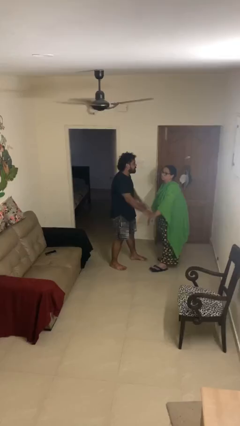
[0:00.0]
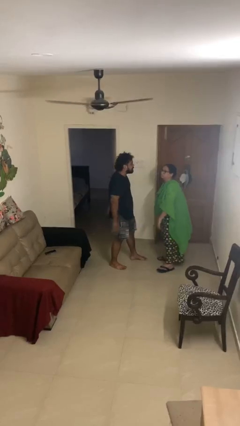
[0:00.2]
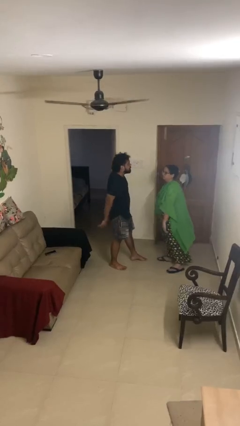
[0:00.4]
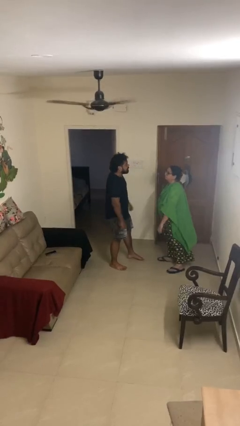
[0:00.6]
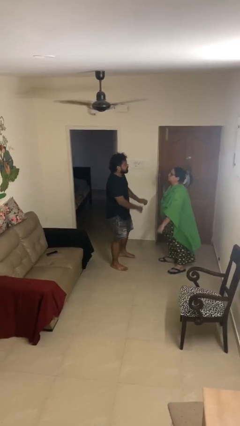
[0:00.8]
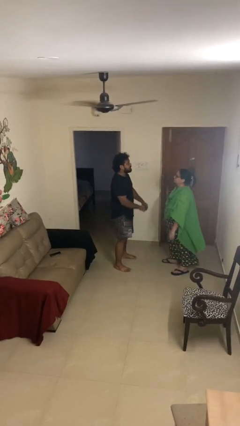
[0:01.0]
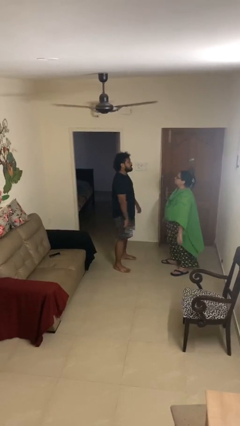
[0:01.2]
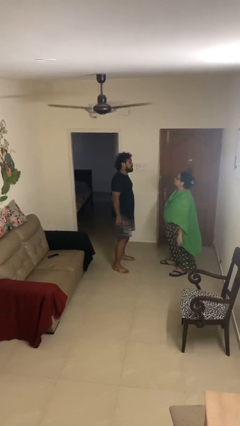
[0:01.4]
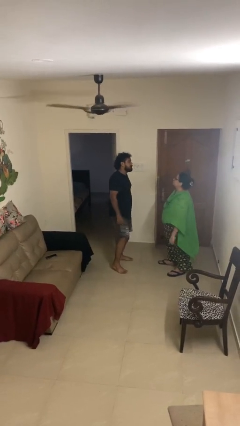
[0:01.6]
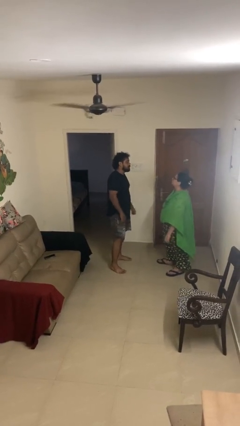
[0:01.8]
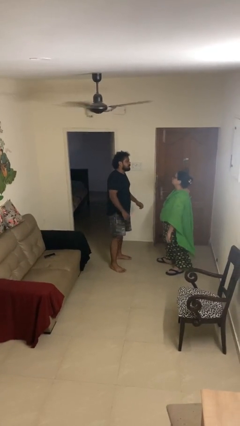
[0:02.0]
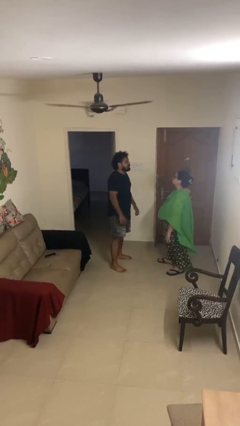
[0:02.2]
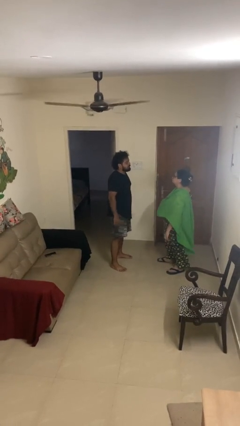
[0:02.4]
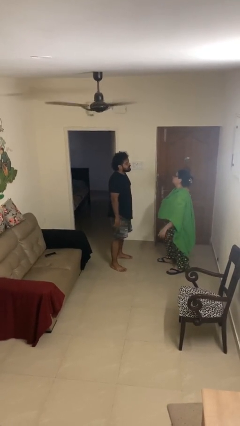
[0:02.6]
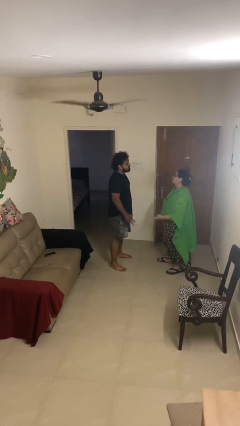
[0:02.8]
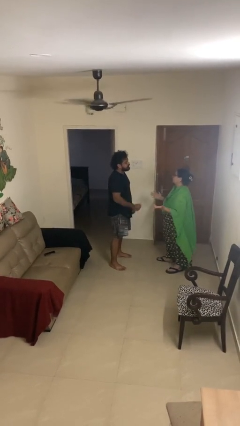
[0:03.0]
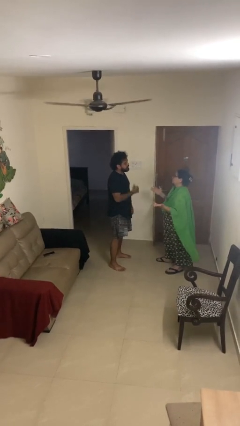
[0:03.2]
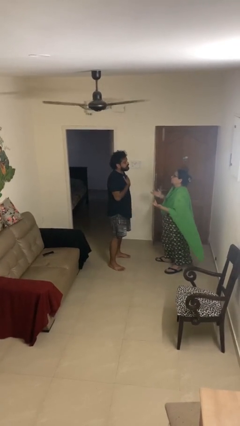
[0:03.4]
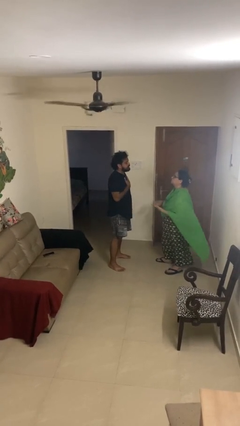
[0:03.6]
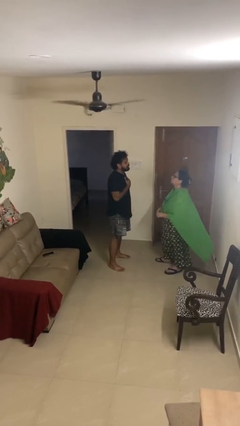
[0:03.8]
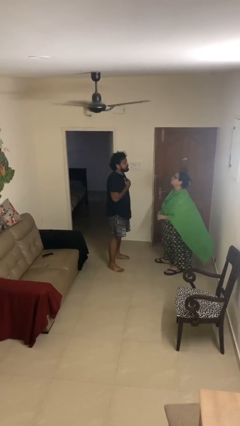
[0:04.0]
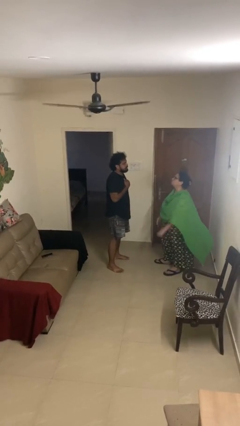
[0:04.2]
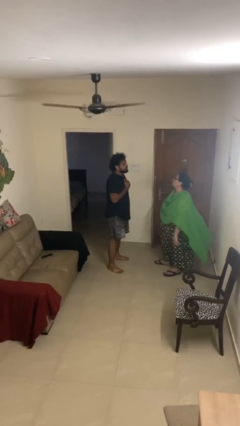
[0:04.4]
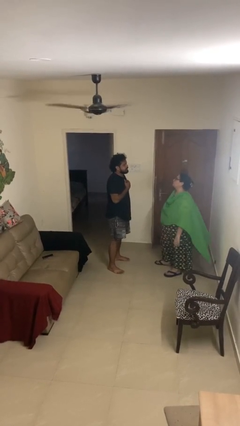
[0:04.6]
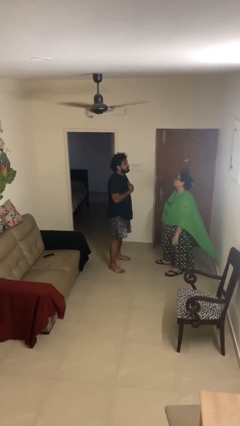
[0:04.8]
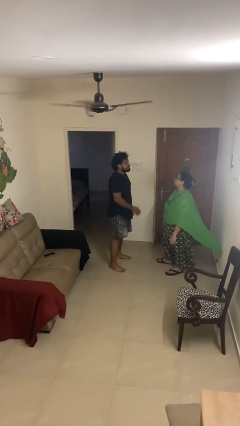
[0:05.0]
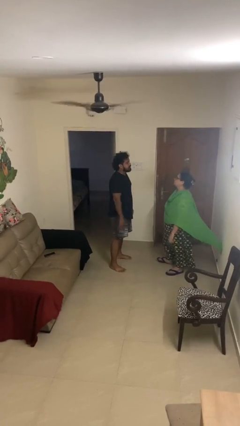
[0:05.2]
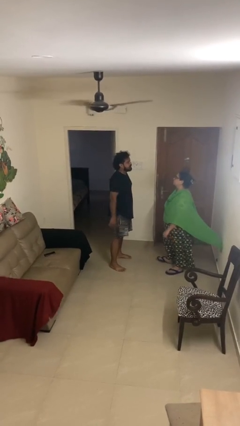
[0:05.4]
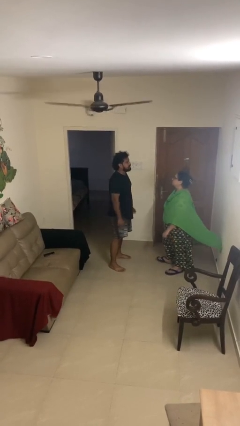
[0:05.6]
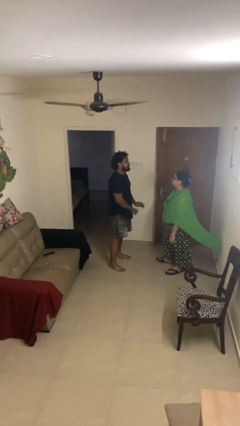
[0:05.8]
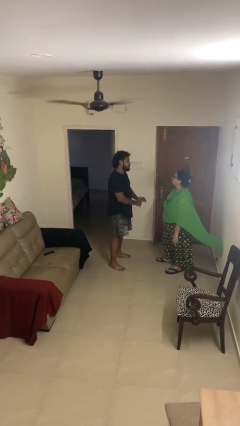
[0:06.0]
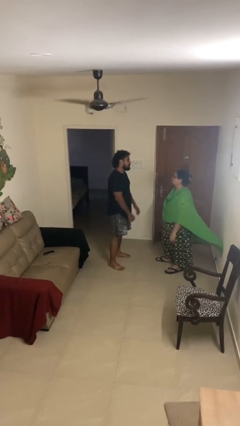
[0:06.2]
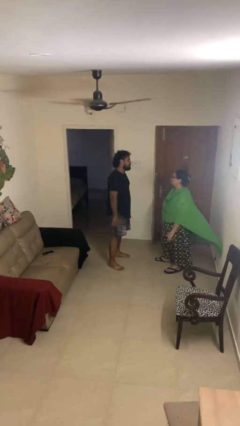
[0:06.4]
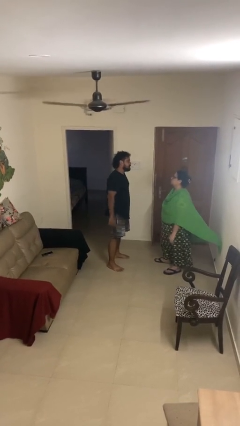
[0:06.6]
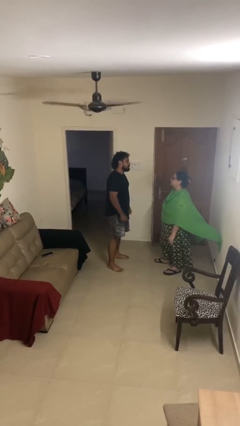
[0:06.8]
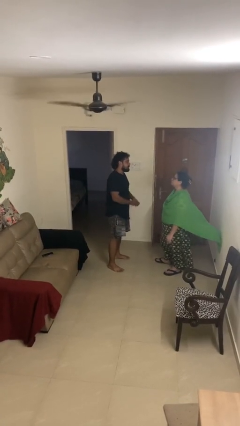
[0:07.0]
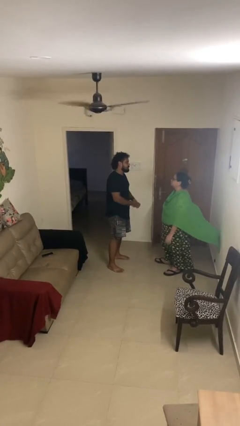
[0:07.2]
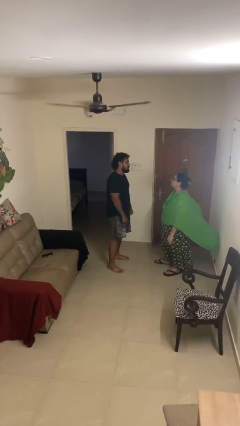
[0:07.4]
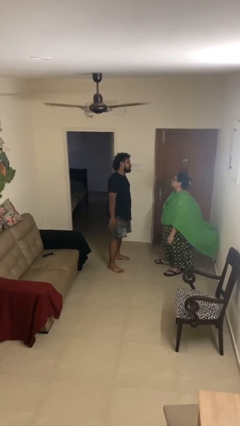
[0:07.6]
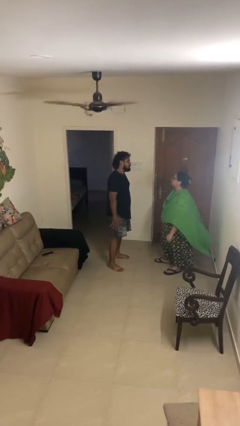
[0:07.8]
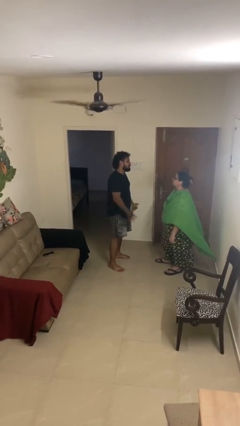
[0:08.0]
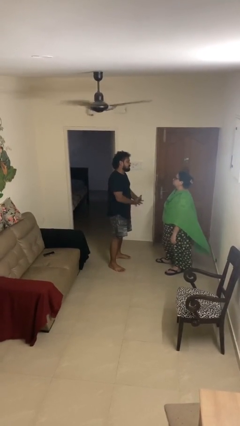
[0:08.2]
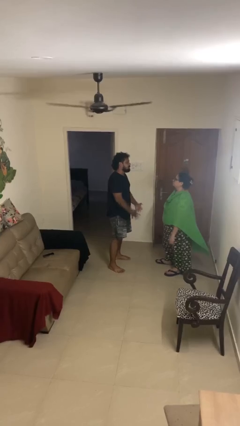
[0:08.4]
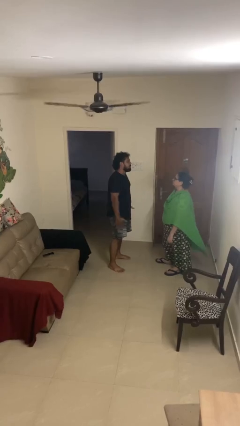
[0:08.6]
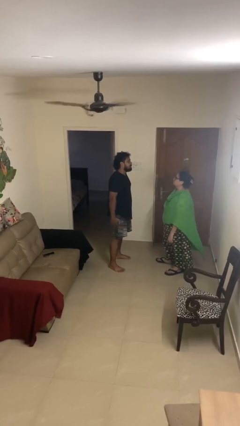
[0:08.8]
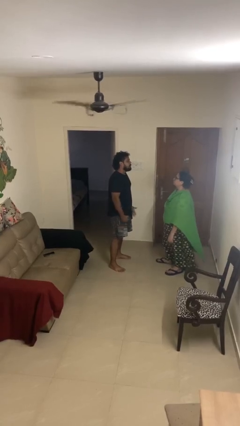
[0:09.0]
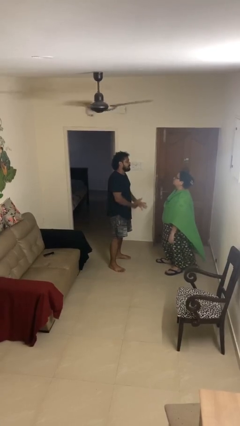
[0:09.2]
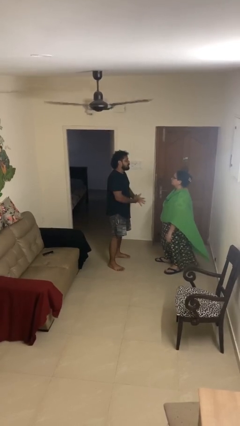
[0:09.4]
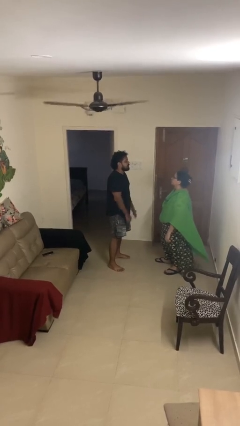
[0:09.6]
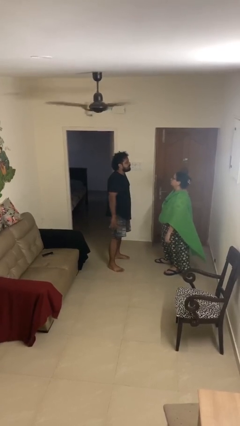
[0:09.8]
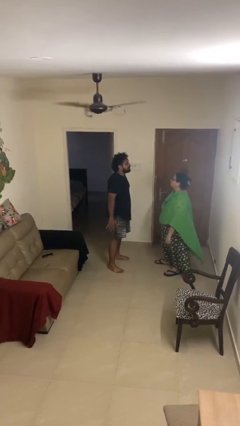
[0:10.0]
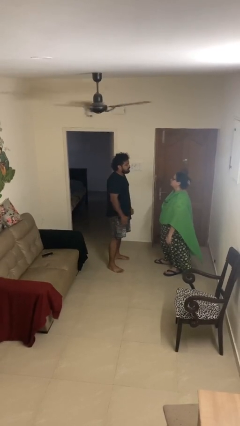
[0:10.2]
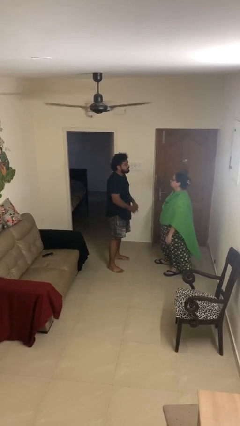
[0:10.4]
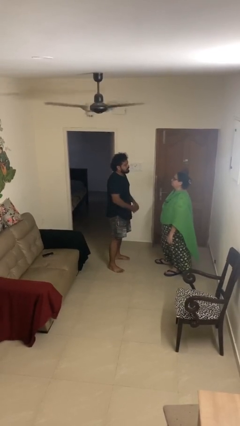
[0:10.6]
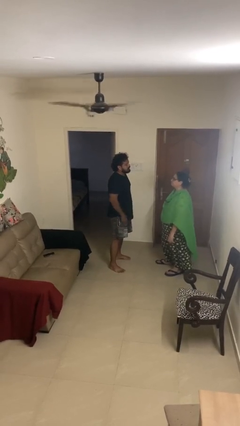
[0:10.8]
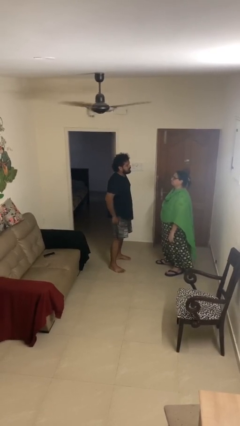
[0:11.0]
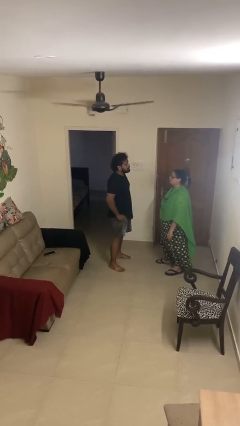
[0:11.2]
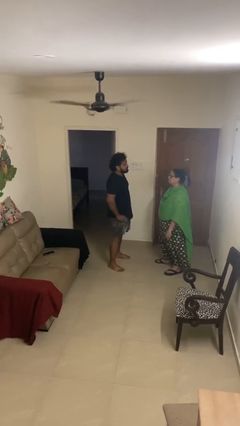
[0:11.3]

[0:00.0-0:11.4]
person talks to person

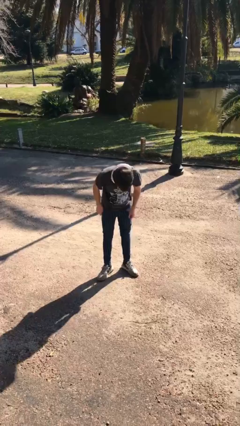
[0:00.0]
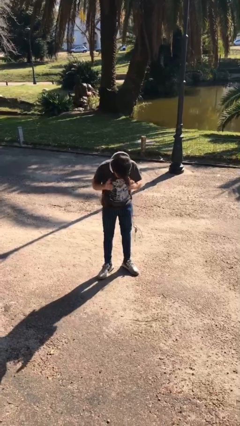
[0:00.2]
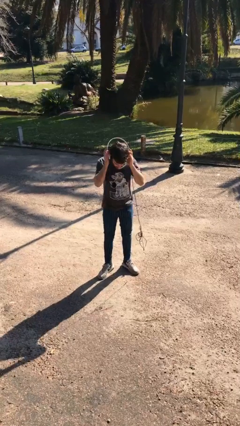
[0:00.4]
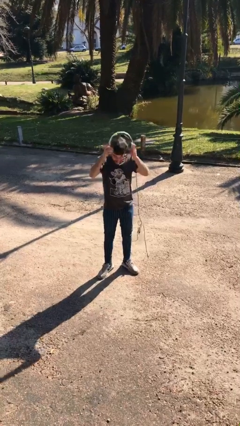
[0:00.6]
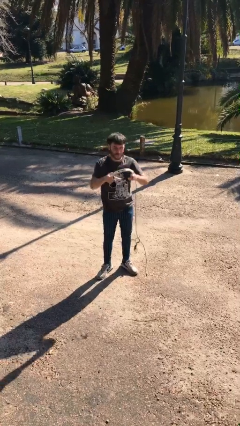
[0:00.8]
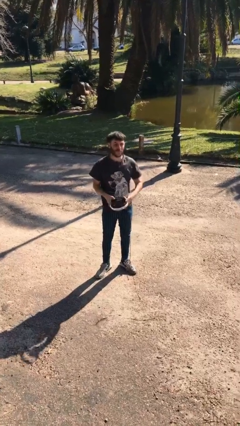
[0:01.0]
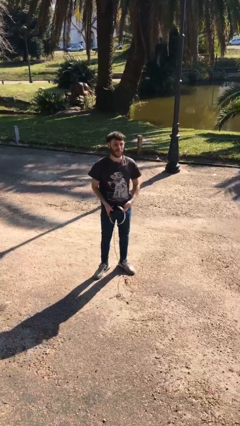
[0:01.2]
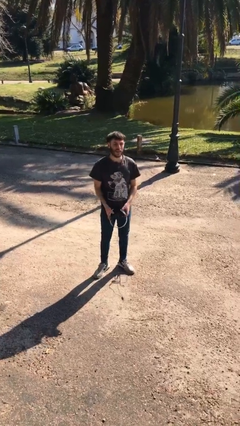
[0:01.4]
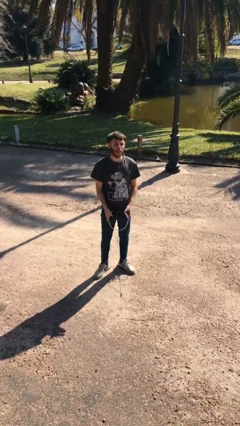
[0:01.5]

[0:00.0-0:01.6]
person takes off headphones

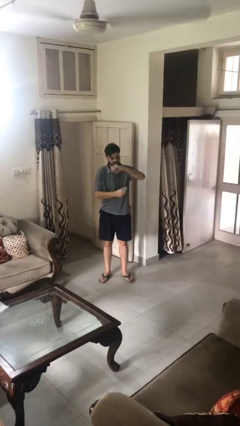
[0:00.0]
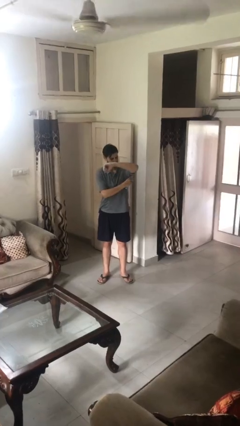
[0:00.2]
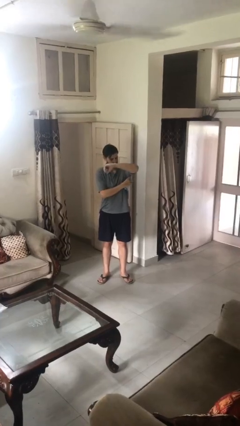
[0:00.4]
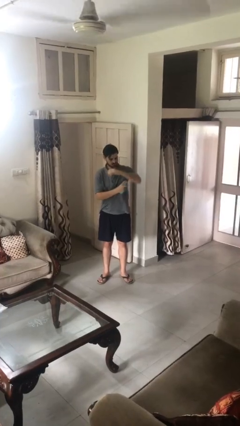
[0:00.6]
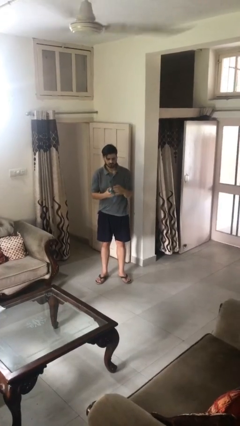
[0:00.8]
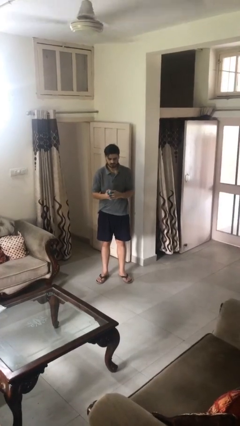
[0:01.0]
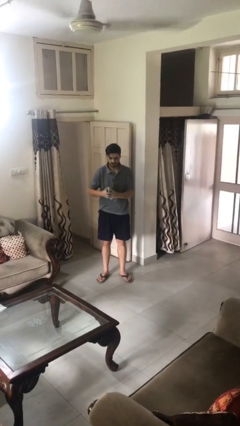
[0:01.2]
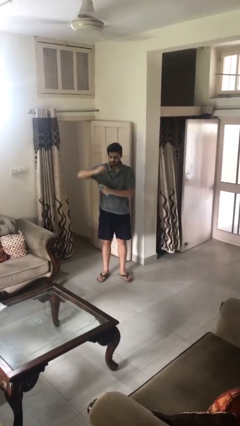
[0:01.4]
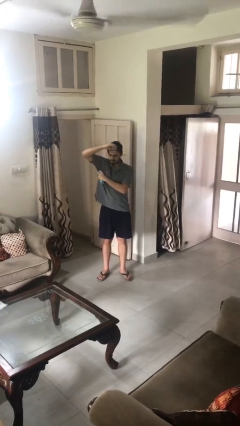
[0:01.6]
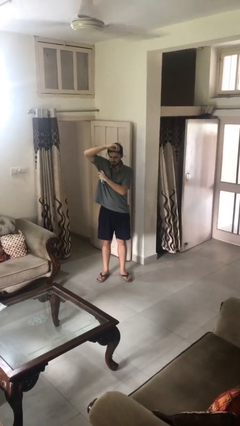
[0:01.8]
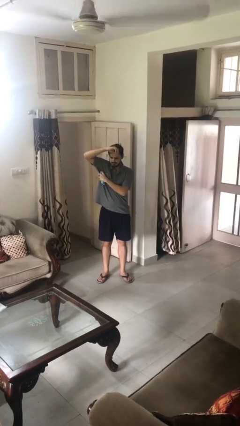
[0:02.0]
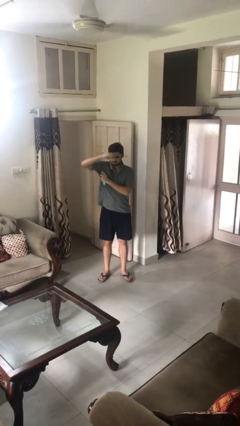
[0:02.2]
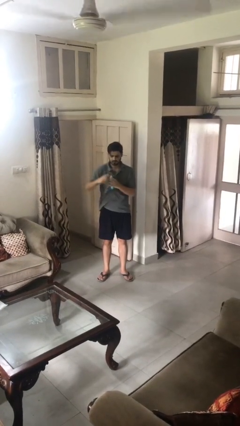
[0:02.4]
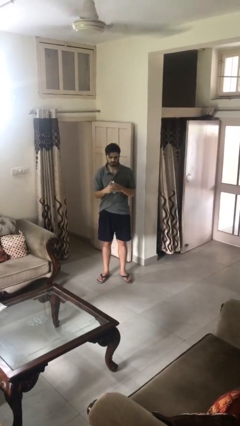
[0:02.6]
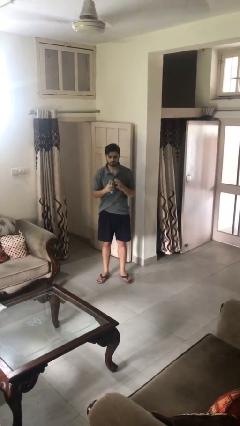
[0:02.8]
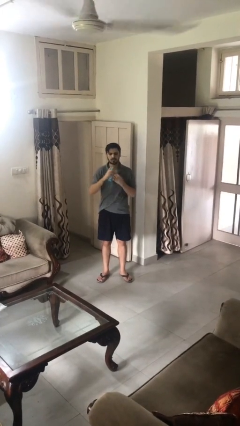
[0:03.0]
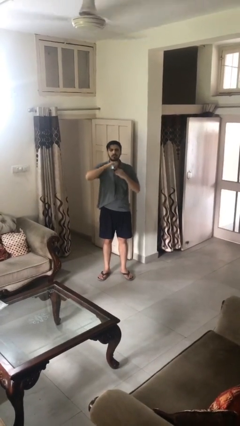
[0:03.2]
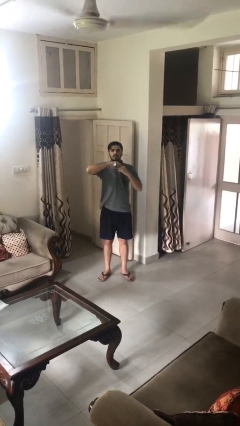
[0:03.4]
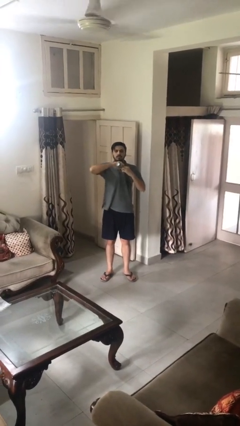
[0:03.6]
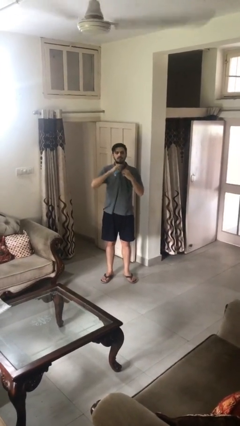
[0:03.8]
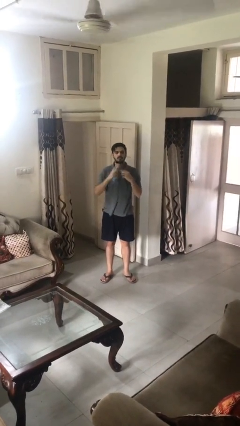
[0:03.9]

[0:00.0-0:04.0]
person applies deodorant

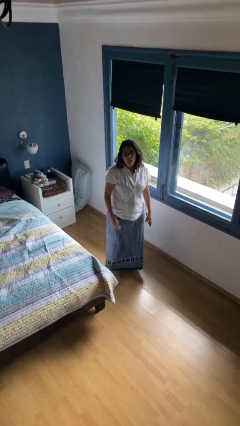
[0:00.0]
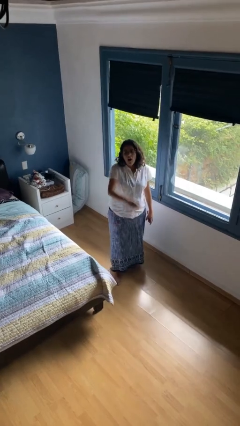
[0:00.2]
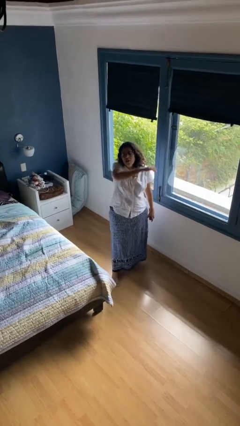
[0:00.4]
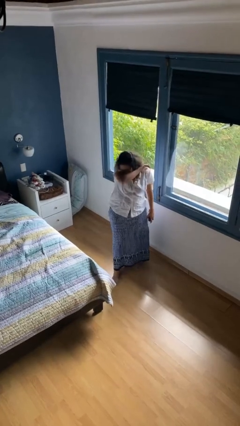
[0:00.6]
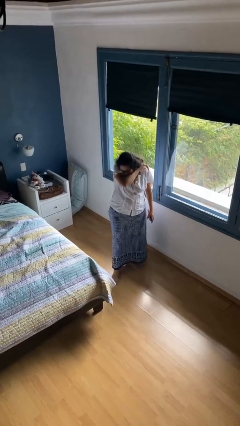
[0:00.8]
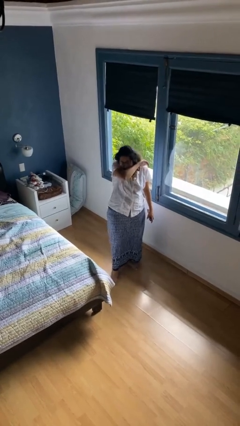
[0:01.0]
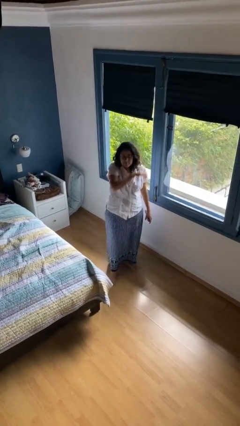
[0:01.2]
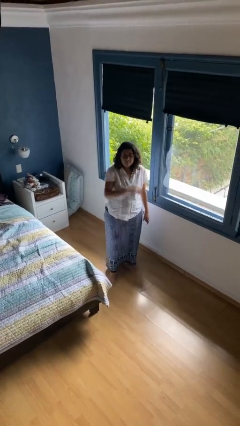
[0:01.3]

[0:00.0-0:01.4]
person sneezes into arm
